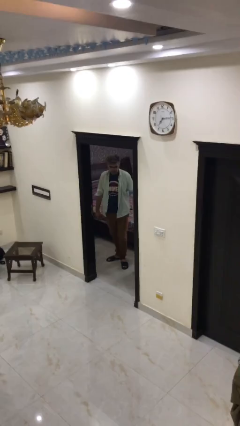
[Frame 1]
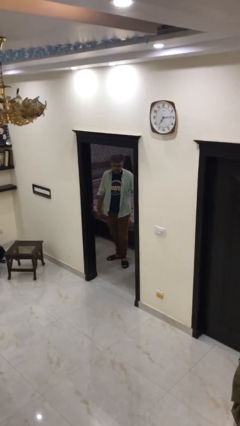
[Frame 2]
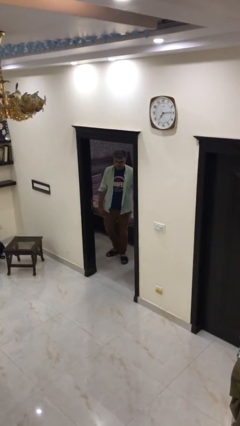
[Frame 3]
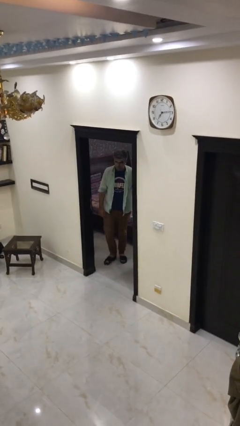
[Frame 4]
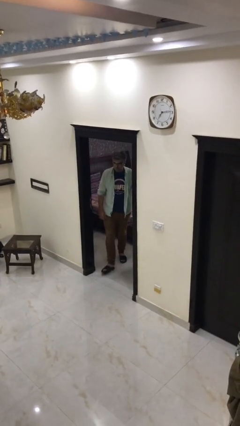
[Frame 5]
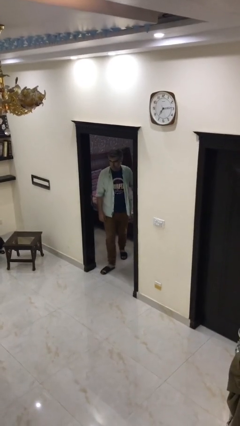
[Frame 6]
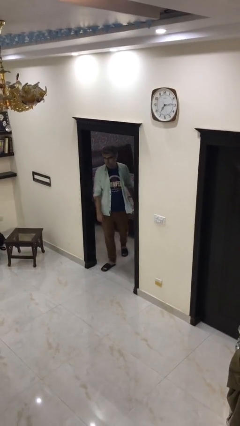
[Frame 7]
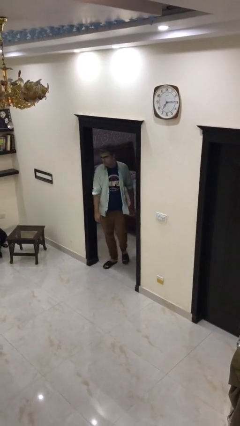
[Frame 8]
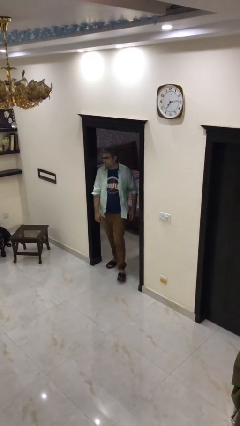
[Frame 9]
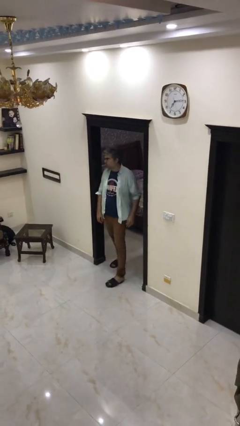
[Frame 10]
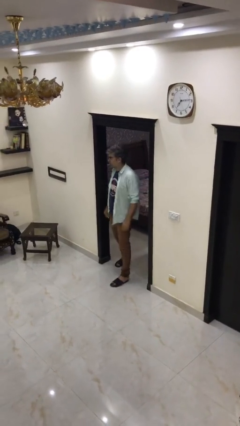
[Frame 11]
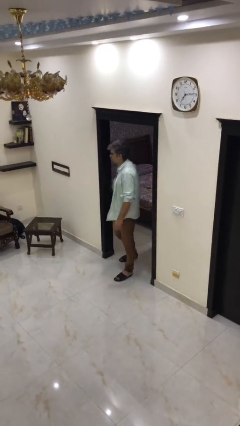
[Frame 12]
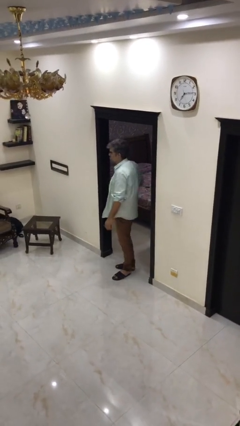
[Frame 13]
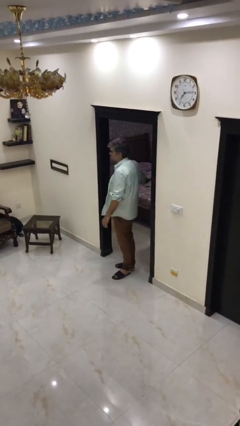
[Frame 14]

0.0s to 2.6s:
person enters scene through structure

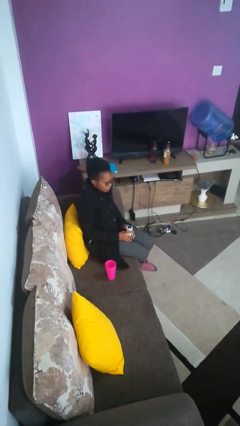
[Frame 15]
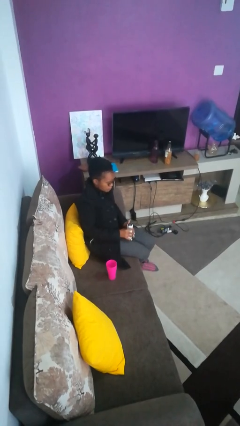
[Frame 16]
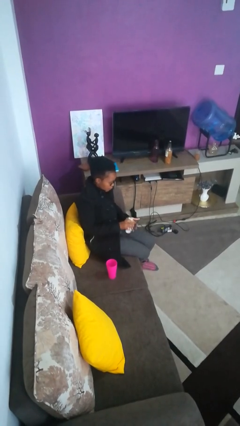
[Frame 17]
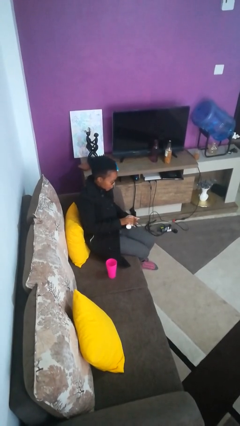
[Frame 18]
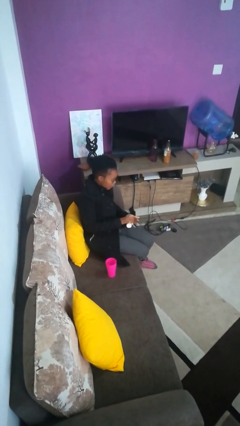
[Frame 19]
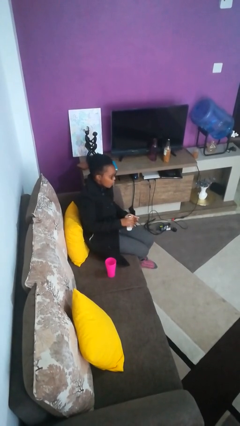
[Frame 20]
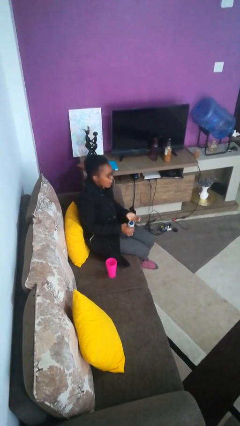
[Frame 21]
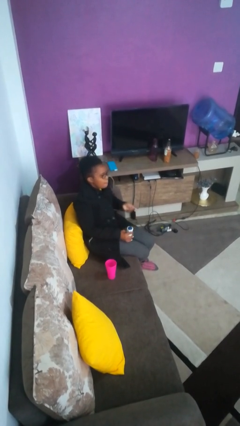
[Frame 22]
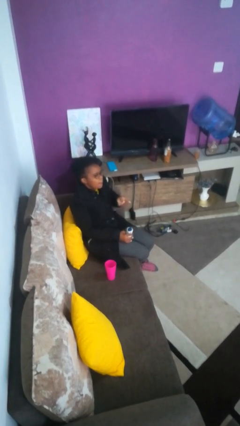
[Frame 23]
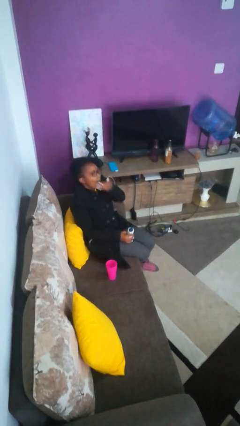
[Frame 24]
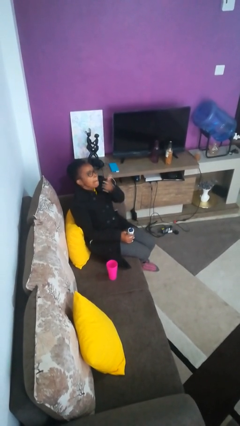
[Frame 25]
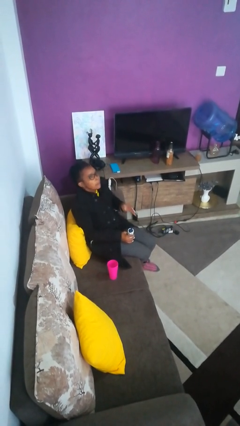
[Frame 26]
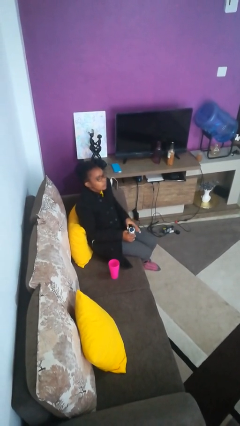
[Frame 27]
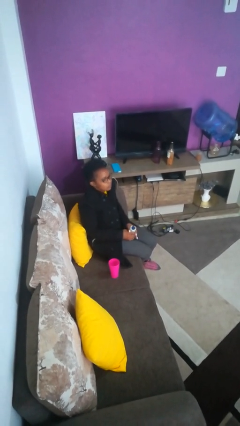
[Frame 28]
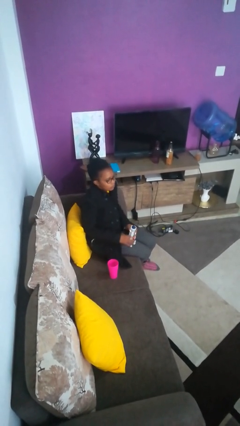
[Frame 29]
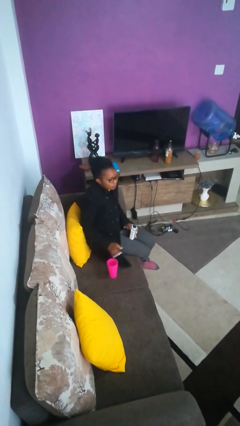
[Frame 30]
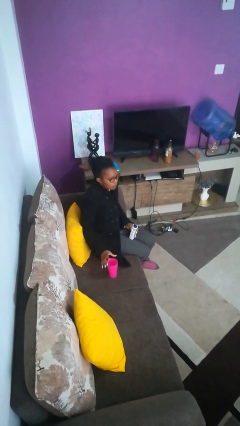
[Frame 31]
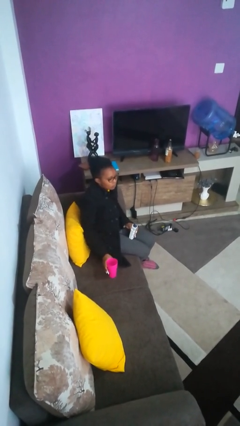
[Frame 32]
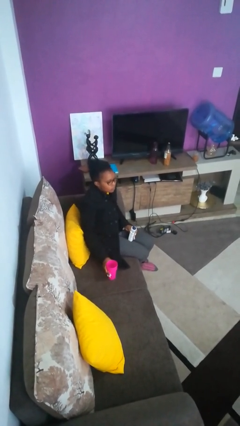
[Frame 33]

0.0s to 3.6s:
person takes medicine pills

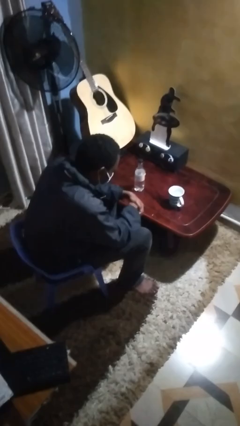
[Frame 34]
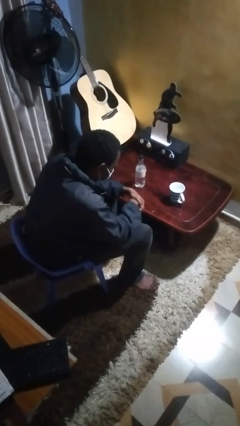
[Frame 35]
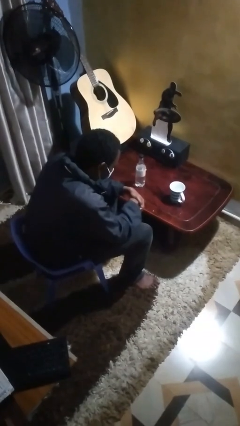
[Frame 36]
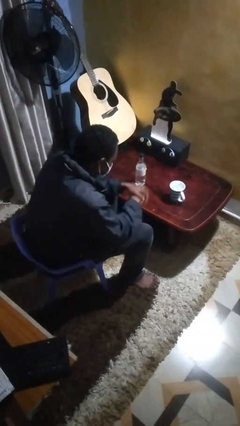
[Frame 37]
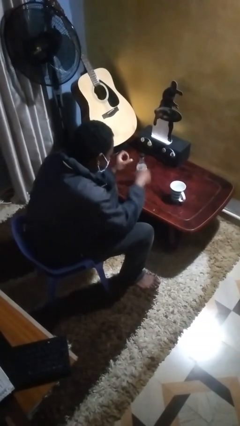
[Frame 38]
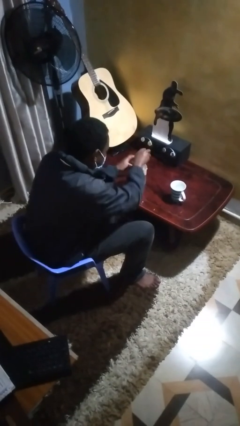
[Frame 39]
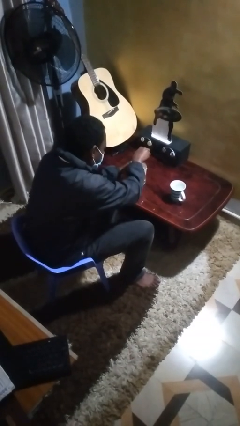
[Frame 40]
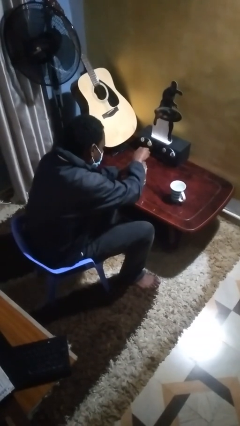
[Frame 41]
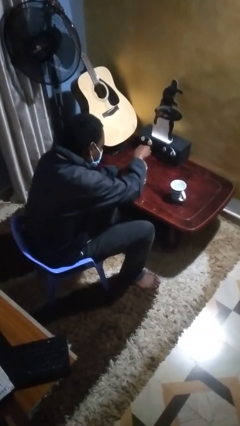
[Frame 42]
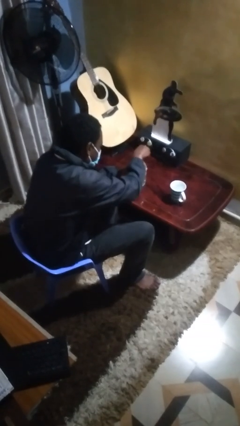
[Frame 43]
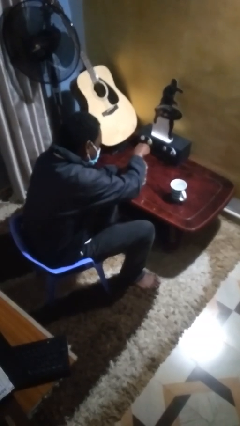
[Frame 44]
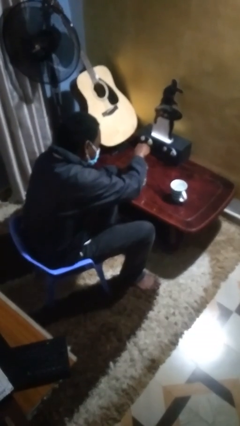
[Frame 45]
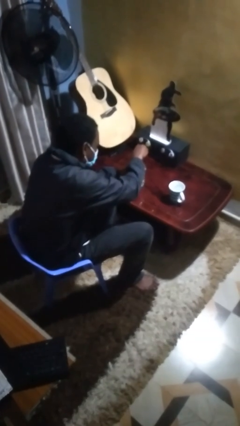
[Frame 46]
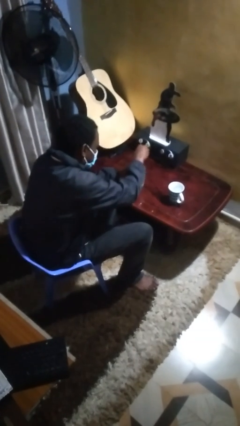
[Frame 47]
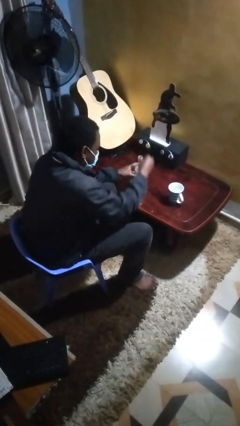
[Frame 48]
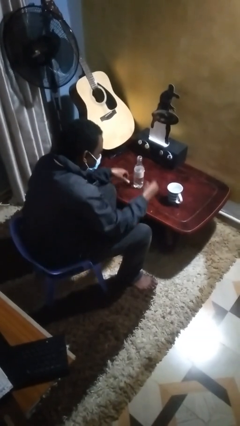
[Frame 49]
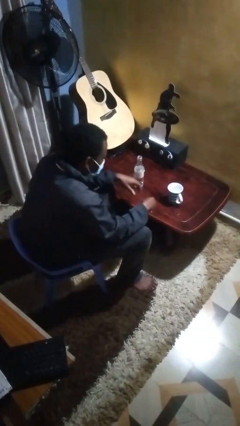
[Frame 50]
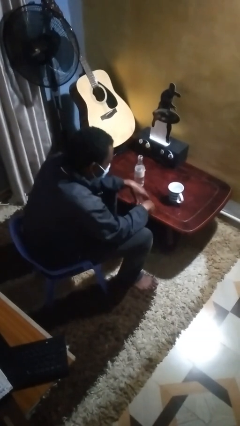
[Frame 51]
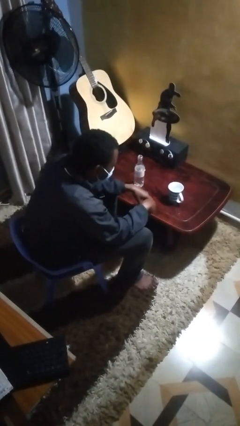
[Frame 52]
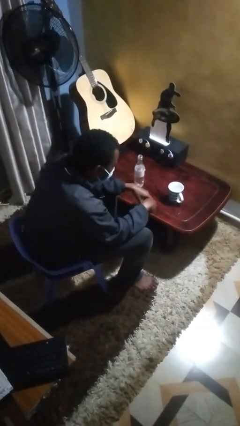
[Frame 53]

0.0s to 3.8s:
person unscrews lid from bottle

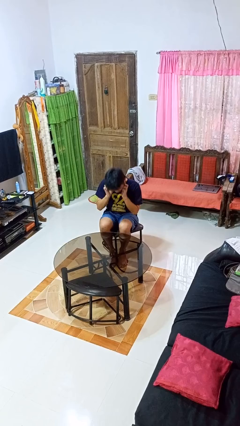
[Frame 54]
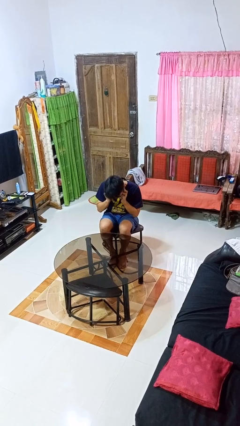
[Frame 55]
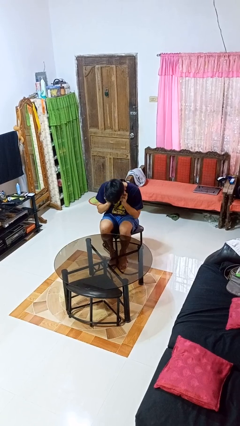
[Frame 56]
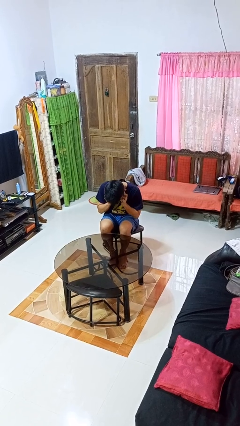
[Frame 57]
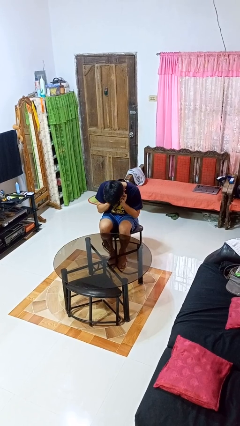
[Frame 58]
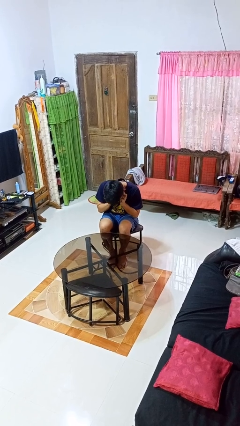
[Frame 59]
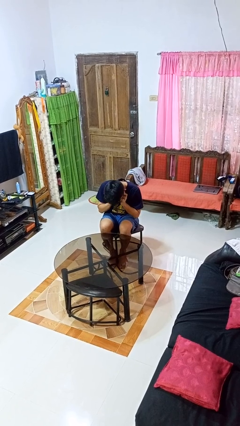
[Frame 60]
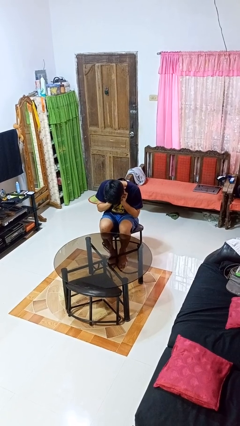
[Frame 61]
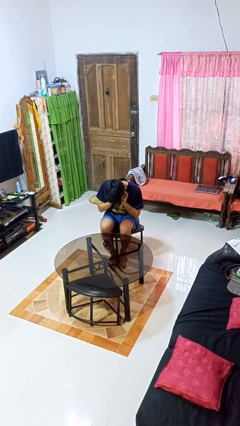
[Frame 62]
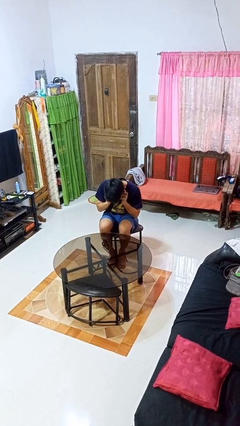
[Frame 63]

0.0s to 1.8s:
person puts fingers in ear

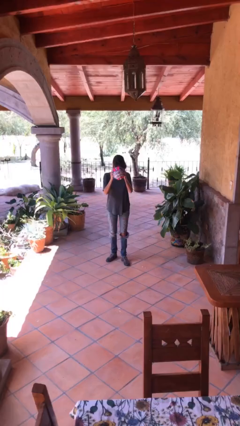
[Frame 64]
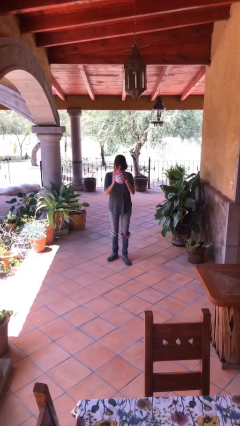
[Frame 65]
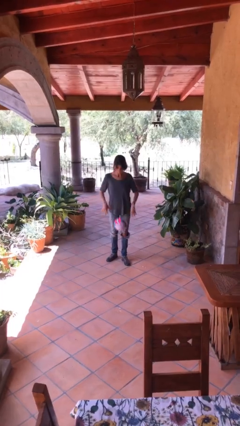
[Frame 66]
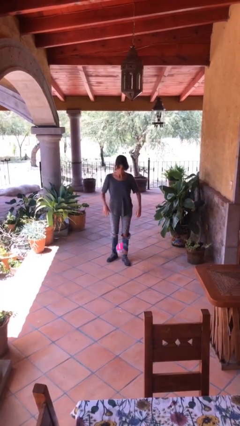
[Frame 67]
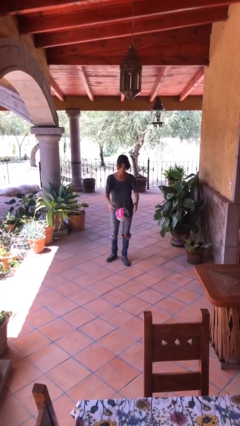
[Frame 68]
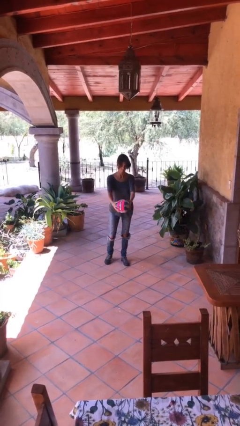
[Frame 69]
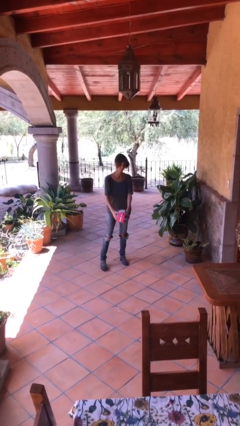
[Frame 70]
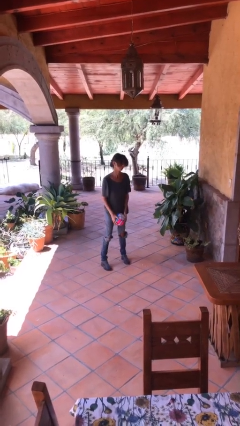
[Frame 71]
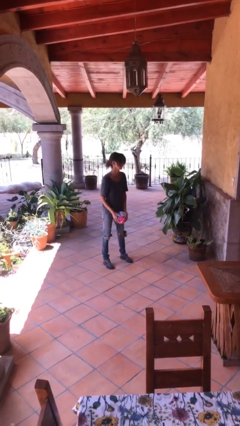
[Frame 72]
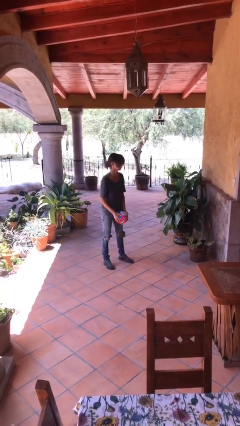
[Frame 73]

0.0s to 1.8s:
person bounces ball on floor

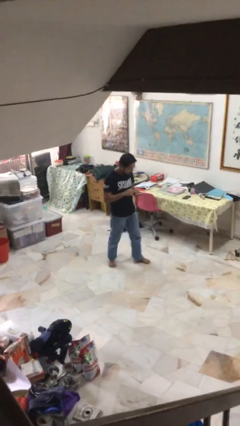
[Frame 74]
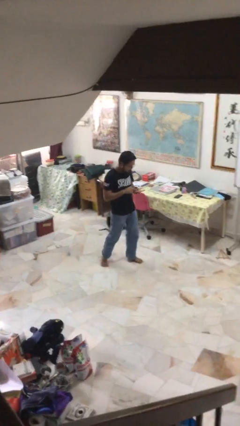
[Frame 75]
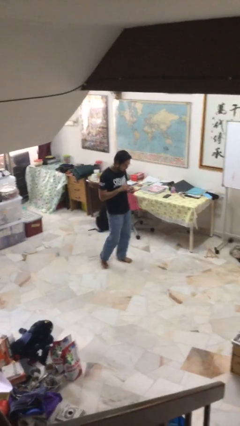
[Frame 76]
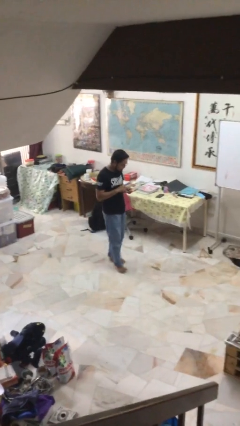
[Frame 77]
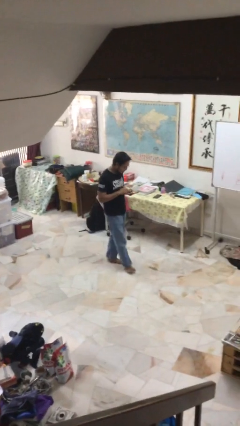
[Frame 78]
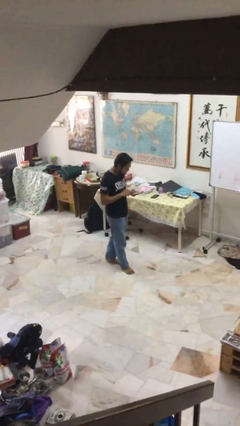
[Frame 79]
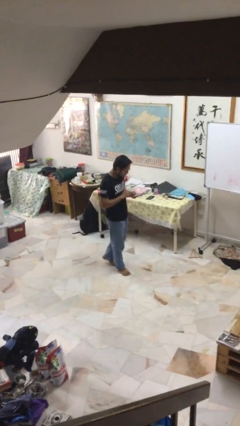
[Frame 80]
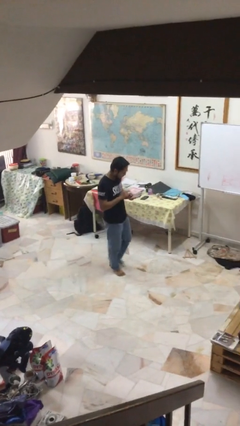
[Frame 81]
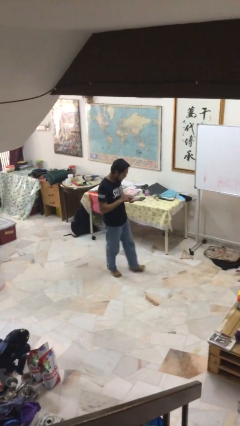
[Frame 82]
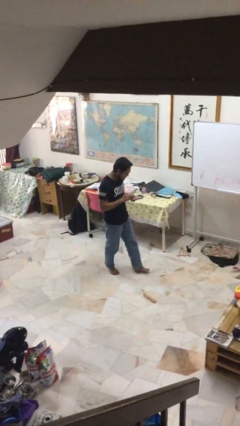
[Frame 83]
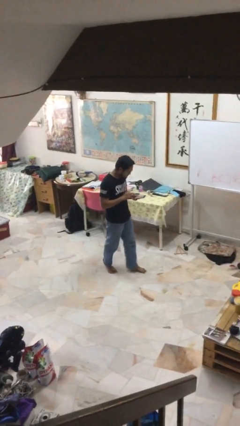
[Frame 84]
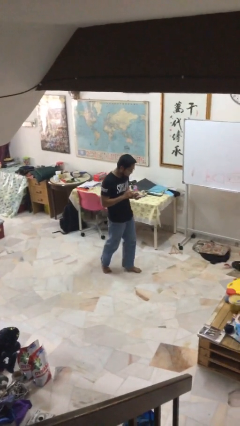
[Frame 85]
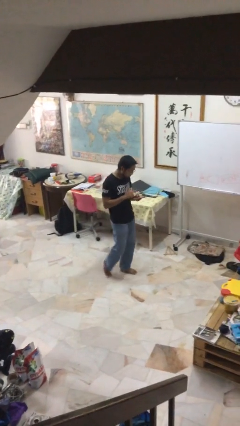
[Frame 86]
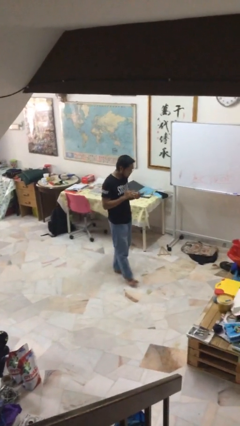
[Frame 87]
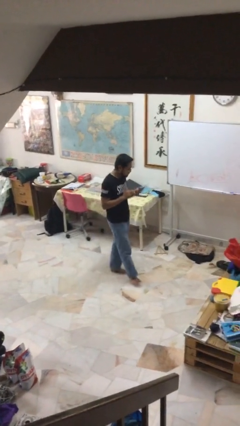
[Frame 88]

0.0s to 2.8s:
person texts on phone

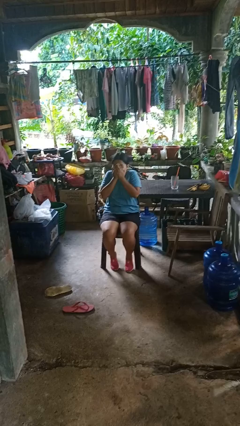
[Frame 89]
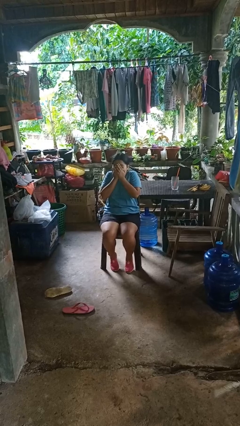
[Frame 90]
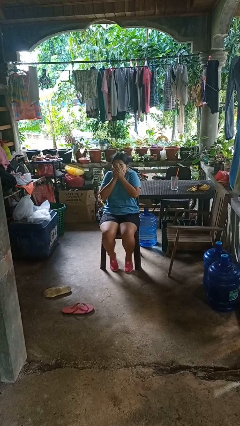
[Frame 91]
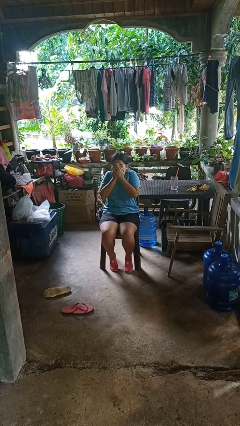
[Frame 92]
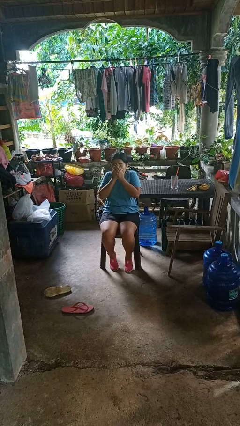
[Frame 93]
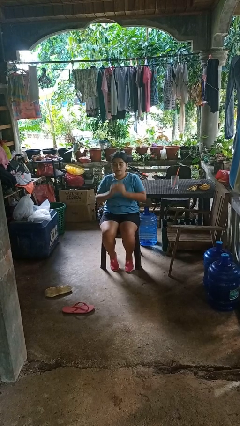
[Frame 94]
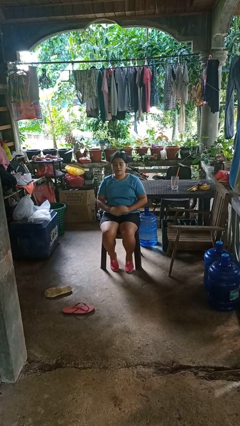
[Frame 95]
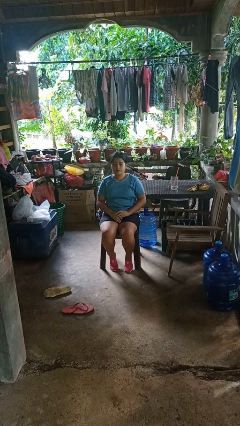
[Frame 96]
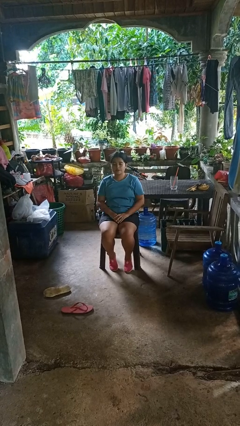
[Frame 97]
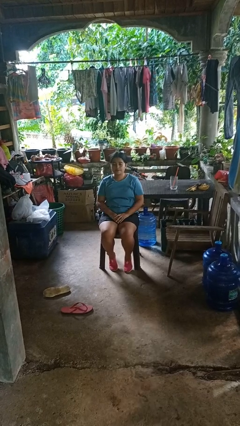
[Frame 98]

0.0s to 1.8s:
person covers face with hands
